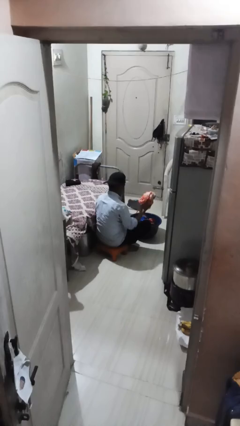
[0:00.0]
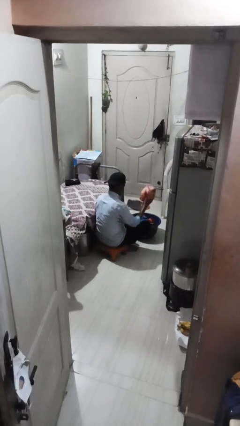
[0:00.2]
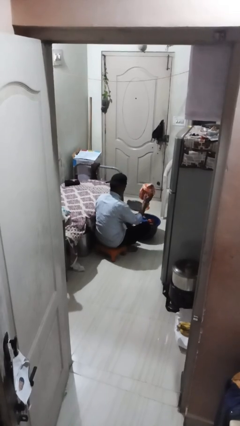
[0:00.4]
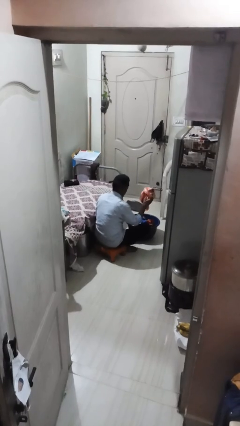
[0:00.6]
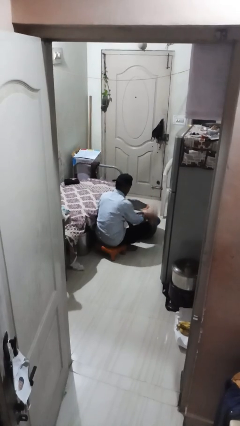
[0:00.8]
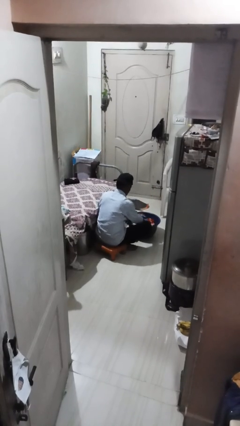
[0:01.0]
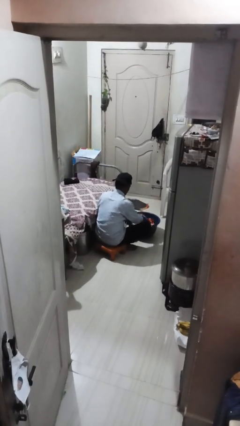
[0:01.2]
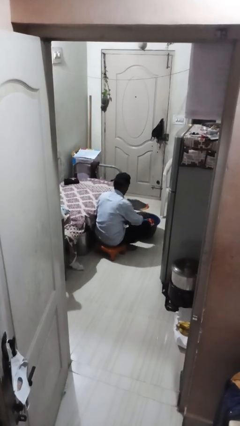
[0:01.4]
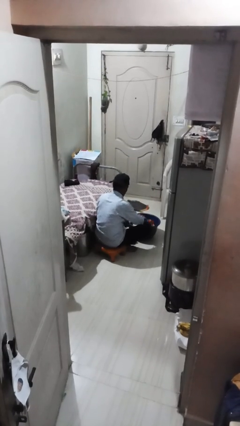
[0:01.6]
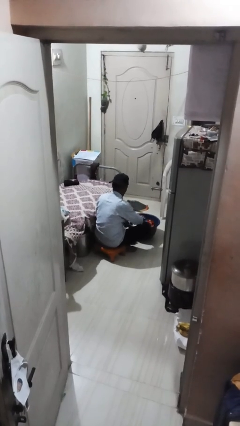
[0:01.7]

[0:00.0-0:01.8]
person puts object into basket

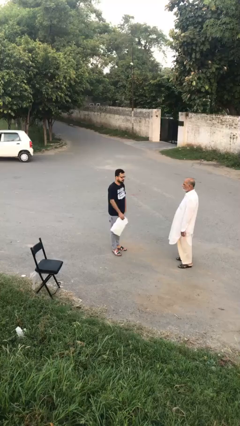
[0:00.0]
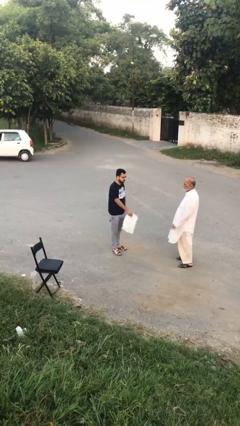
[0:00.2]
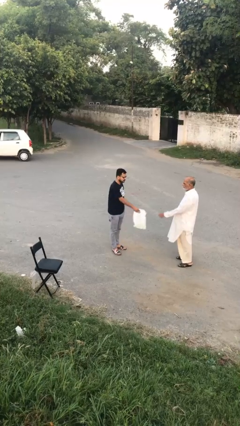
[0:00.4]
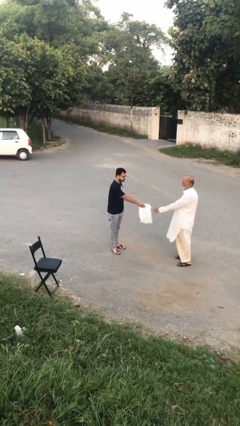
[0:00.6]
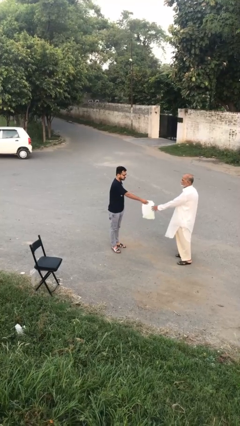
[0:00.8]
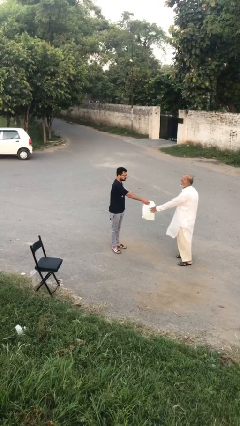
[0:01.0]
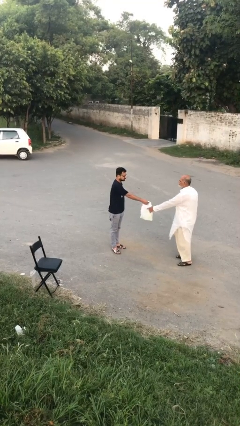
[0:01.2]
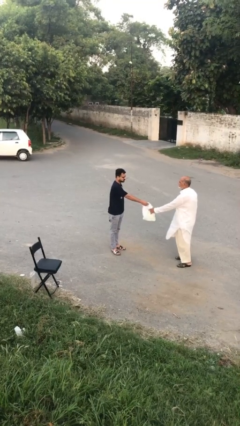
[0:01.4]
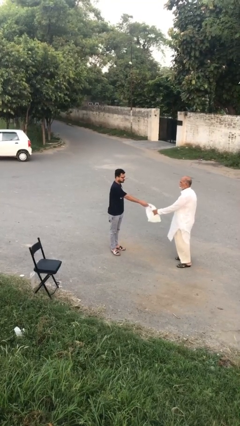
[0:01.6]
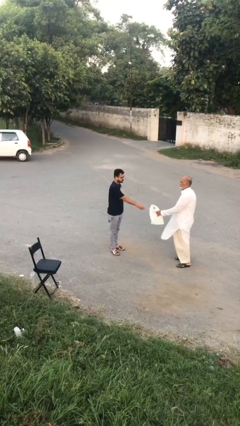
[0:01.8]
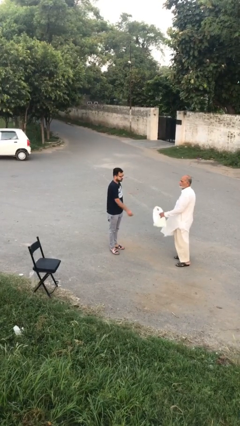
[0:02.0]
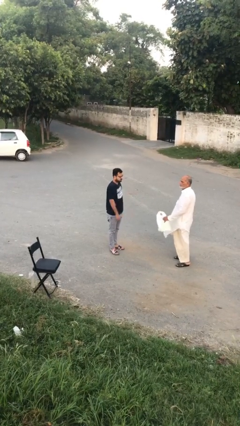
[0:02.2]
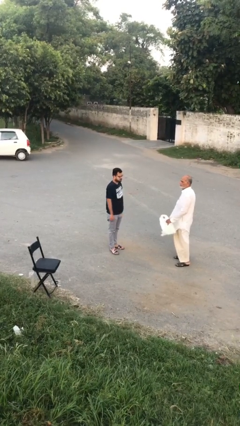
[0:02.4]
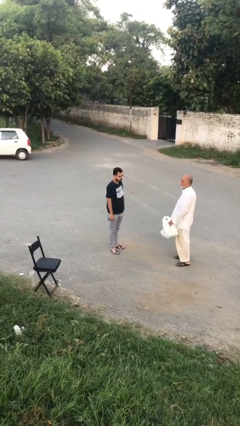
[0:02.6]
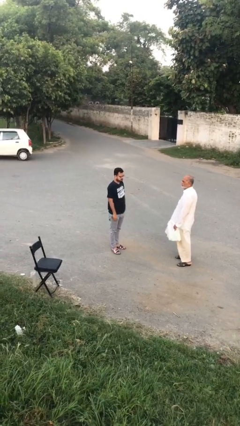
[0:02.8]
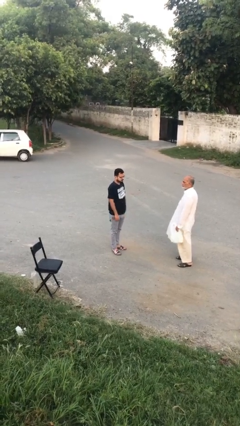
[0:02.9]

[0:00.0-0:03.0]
person transfers object to person

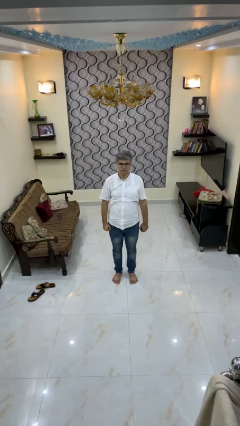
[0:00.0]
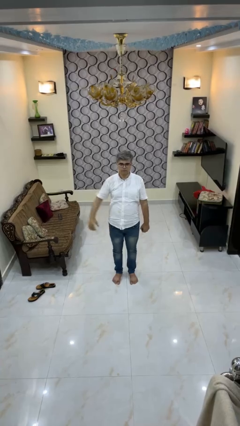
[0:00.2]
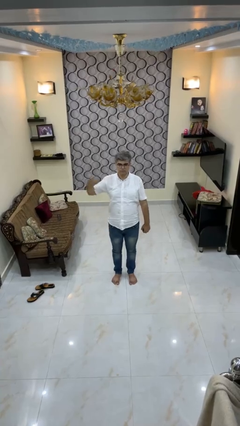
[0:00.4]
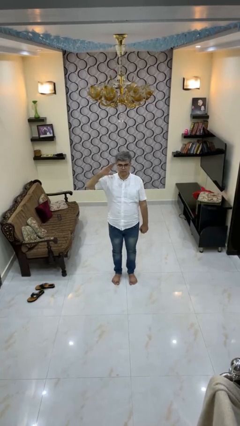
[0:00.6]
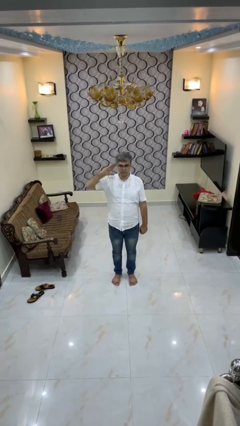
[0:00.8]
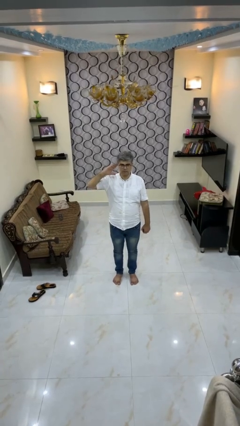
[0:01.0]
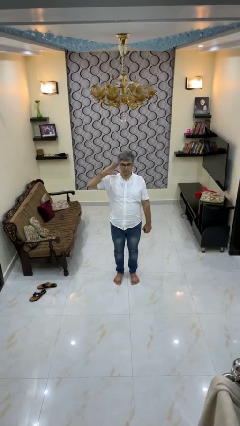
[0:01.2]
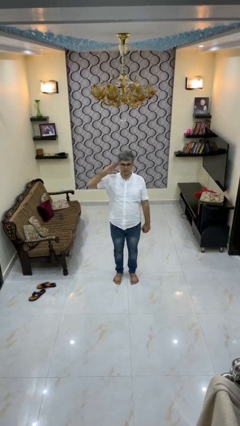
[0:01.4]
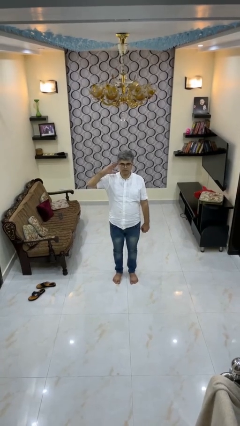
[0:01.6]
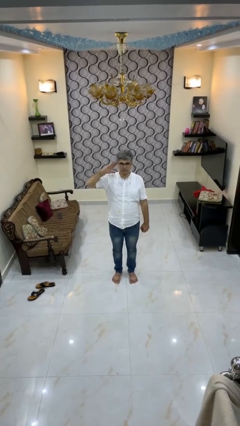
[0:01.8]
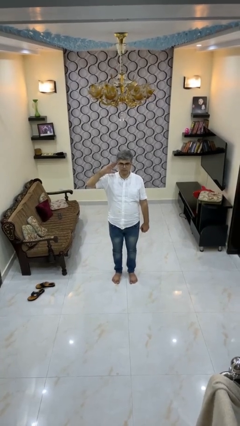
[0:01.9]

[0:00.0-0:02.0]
person salutes

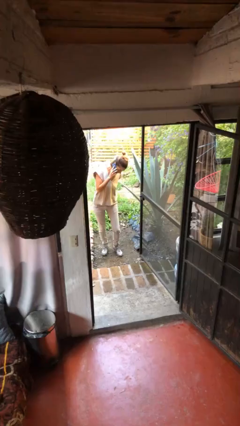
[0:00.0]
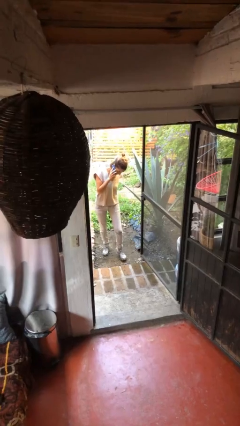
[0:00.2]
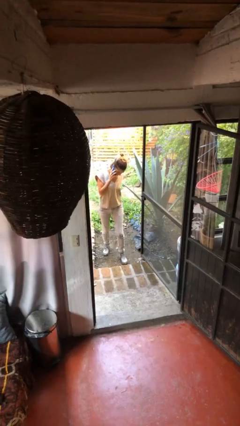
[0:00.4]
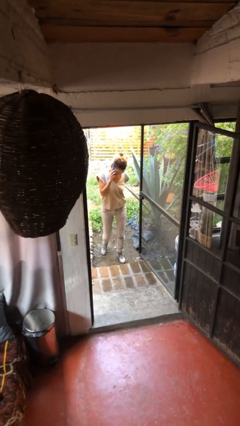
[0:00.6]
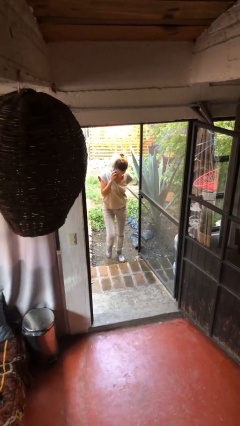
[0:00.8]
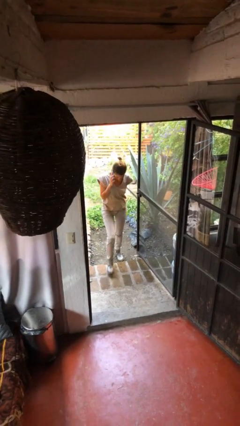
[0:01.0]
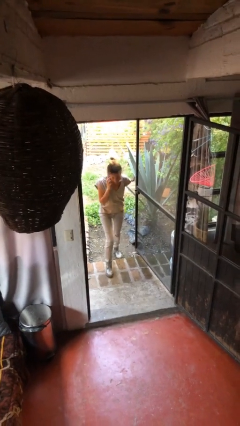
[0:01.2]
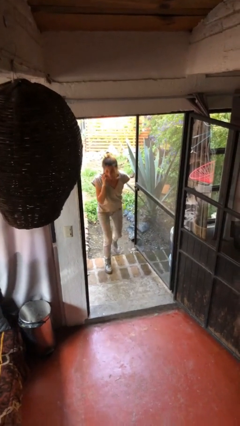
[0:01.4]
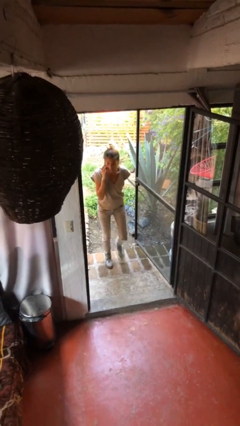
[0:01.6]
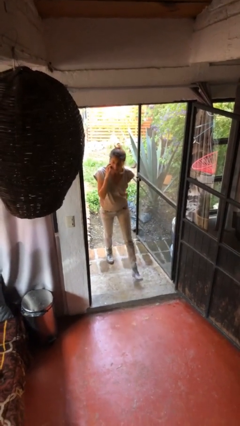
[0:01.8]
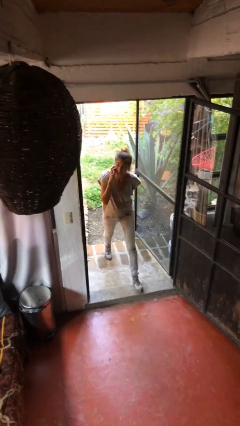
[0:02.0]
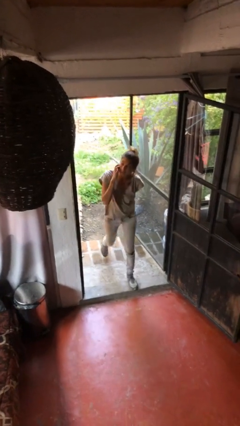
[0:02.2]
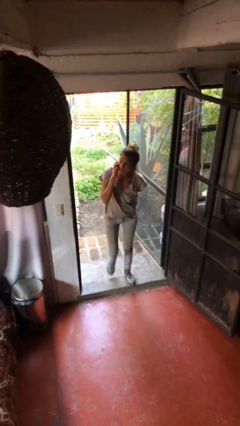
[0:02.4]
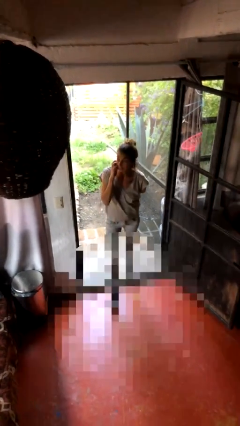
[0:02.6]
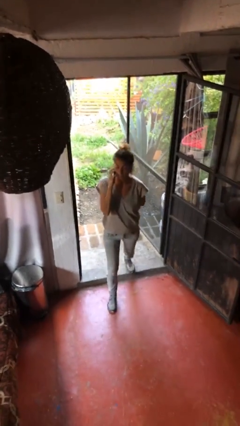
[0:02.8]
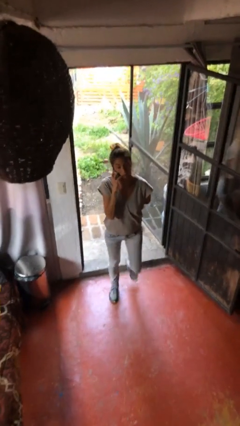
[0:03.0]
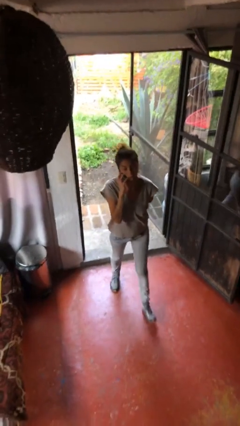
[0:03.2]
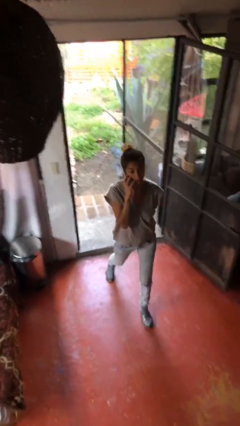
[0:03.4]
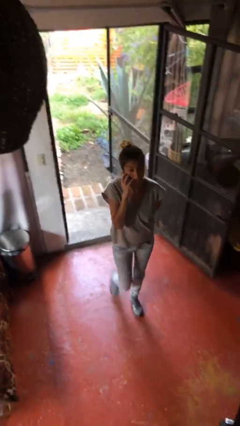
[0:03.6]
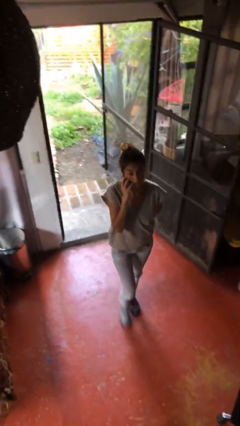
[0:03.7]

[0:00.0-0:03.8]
person enters scene through structure

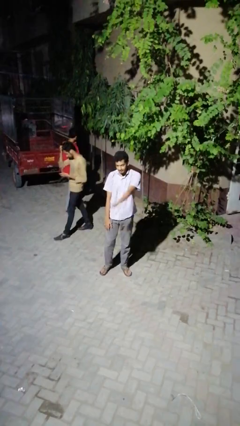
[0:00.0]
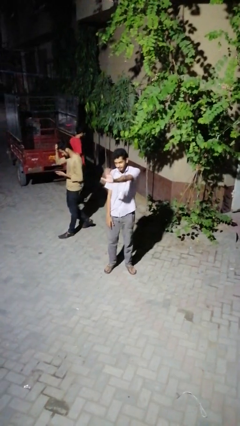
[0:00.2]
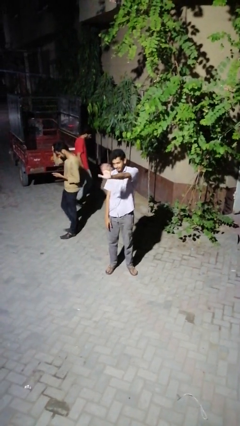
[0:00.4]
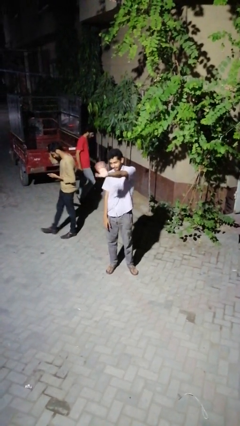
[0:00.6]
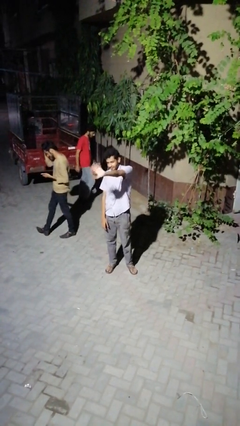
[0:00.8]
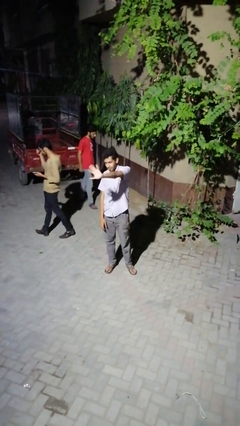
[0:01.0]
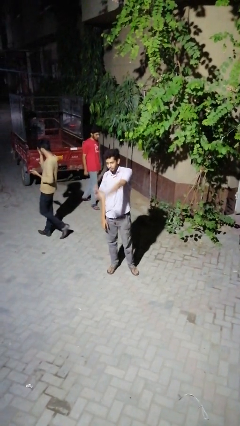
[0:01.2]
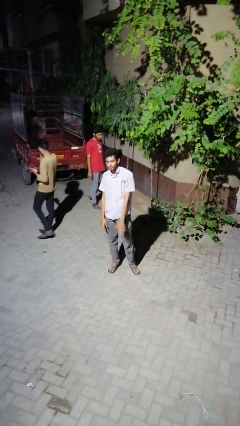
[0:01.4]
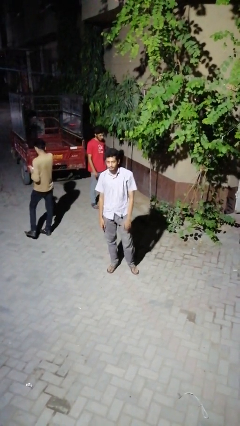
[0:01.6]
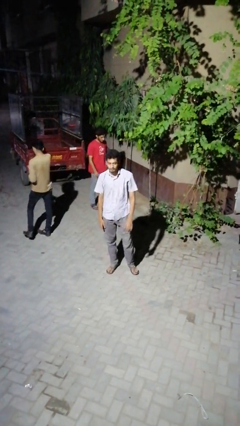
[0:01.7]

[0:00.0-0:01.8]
person waves at person

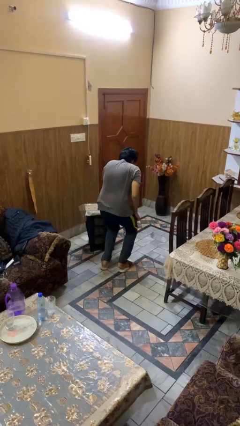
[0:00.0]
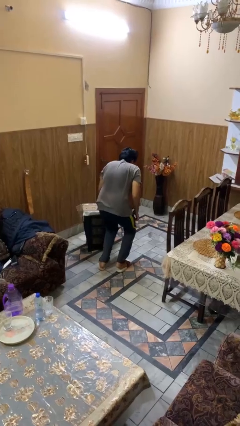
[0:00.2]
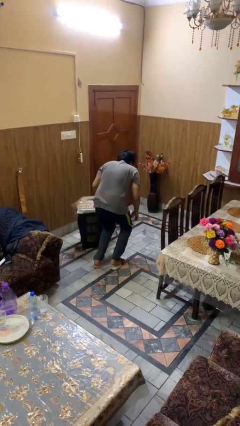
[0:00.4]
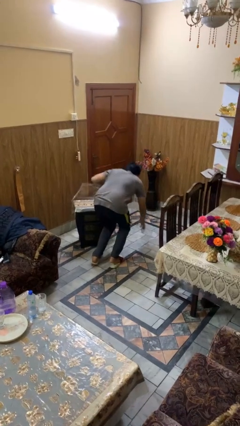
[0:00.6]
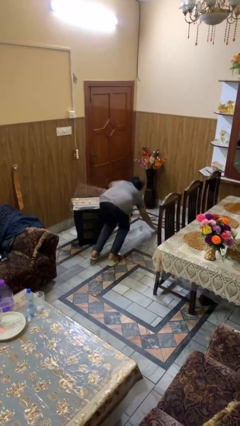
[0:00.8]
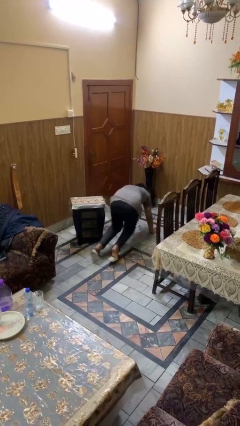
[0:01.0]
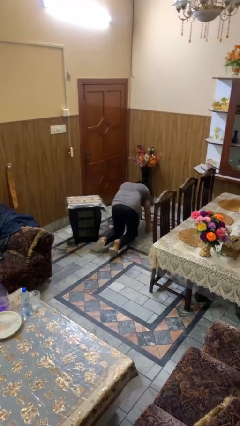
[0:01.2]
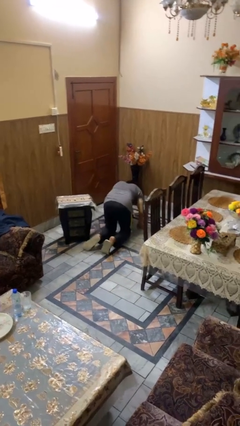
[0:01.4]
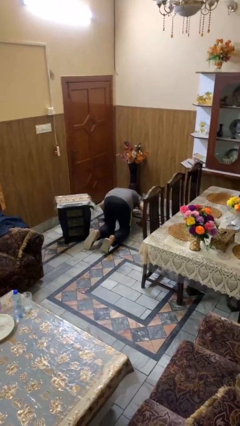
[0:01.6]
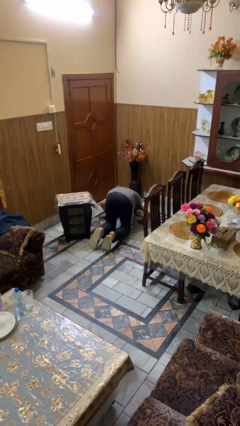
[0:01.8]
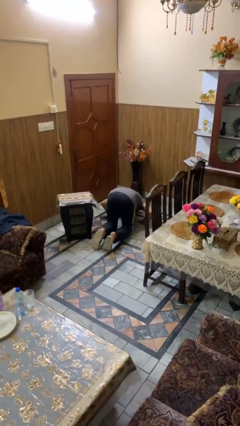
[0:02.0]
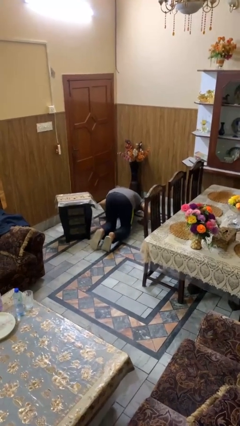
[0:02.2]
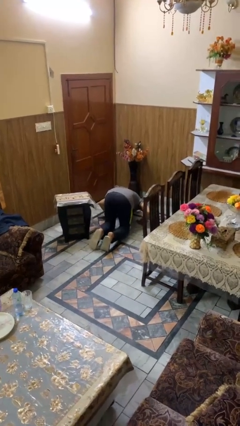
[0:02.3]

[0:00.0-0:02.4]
person lies down on floor

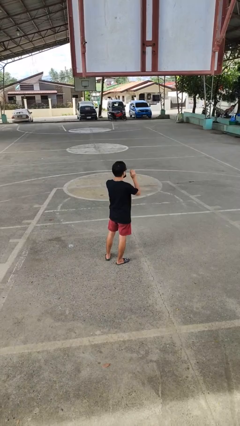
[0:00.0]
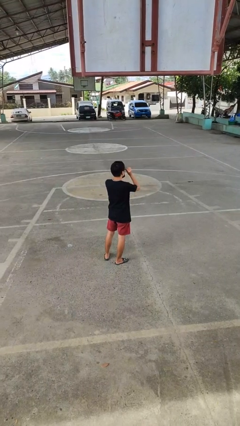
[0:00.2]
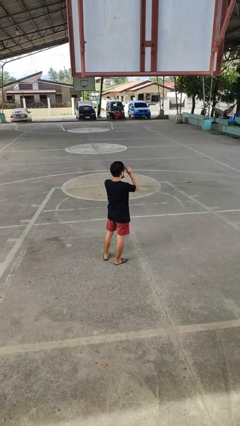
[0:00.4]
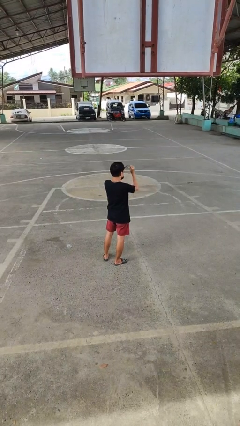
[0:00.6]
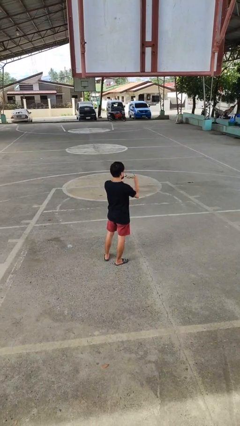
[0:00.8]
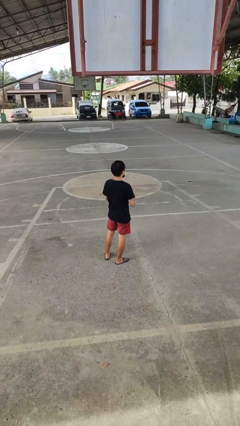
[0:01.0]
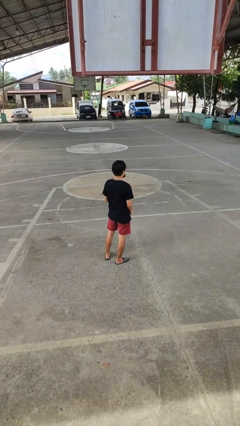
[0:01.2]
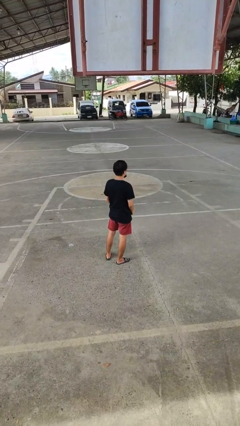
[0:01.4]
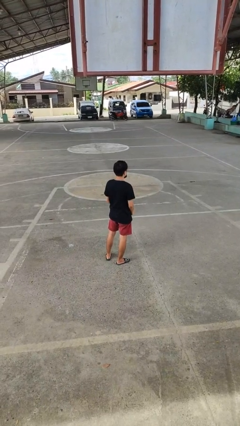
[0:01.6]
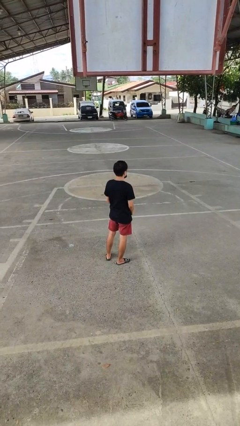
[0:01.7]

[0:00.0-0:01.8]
person takes off glasses

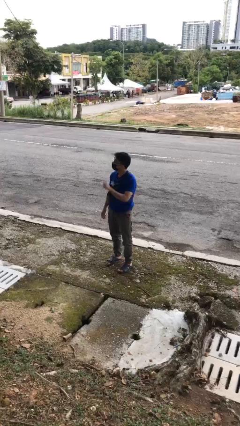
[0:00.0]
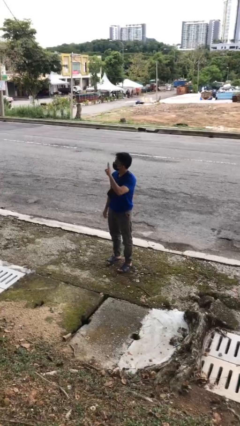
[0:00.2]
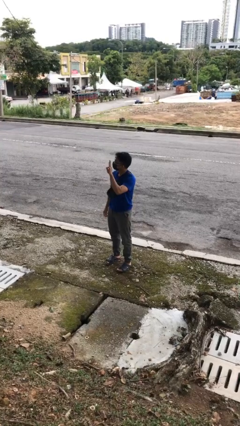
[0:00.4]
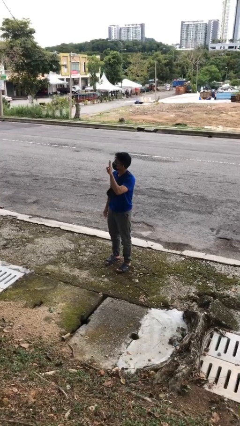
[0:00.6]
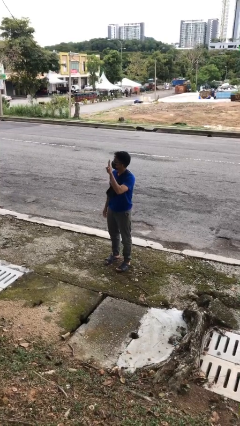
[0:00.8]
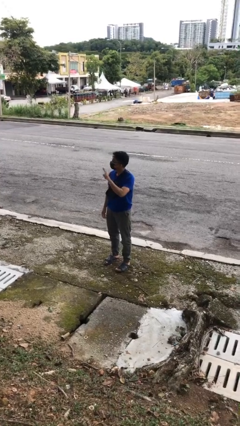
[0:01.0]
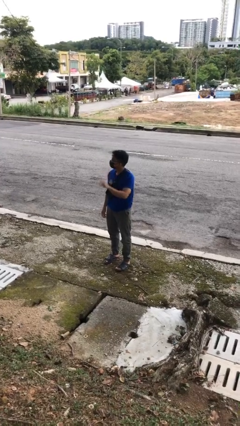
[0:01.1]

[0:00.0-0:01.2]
person gestures number three
